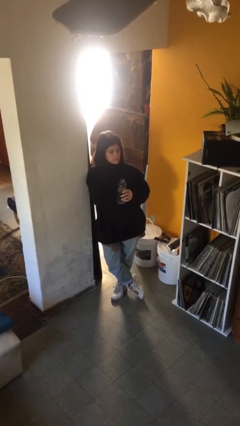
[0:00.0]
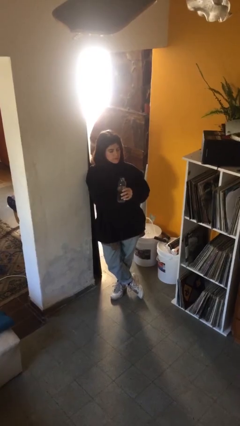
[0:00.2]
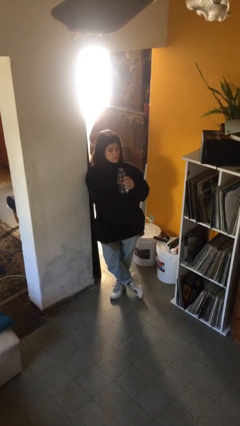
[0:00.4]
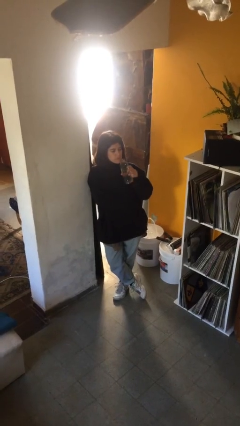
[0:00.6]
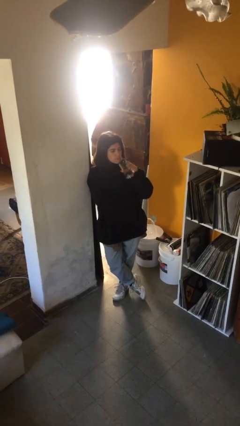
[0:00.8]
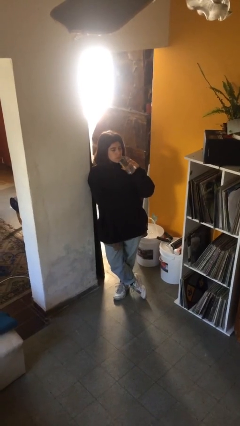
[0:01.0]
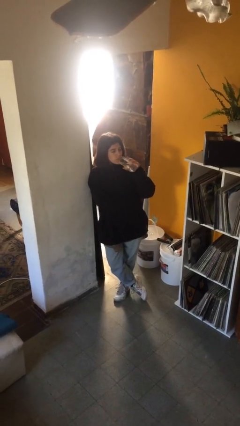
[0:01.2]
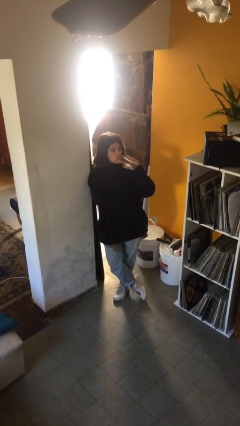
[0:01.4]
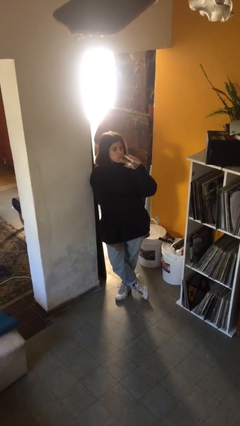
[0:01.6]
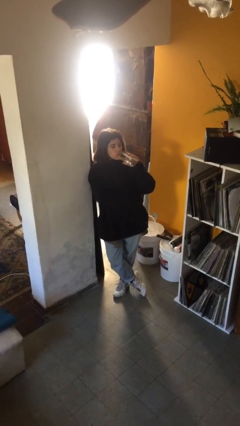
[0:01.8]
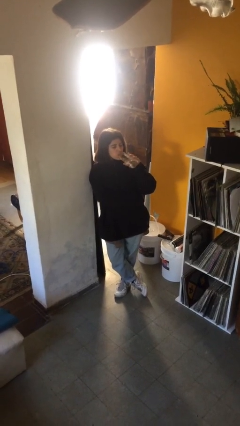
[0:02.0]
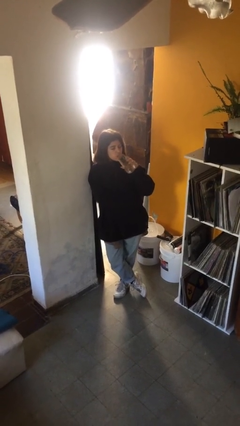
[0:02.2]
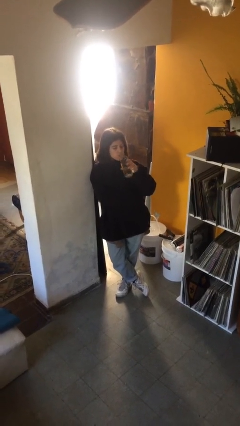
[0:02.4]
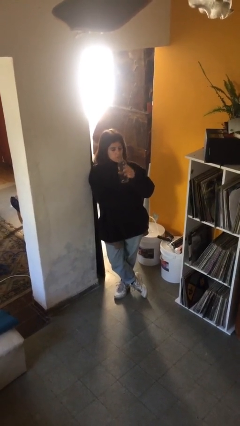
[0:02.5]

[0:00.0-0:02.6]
person drinks from bottle

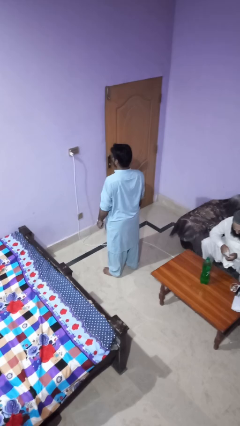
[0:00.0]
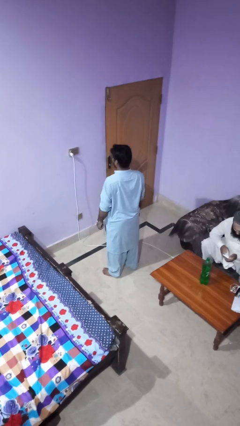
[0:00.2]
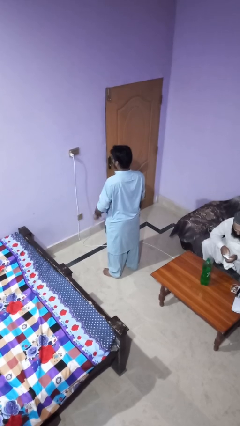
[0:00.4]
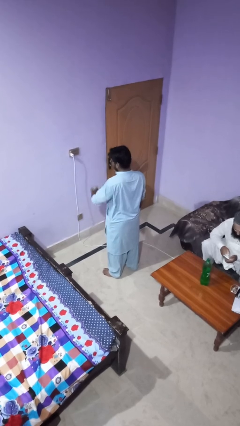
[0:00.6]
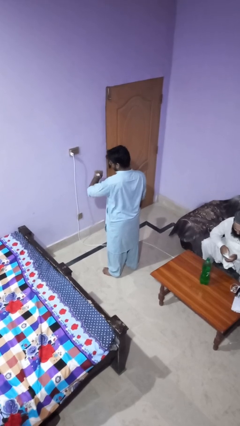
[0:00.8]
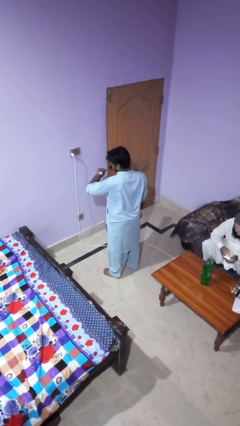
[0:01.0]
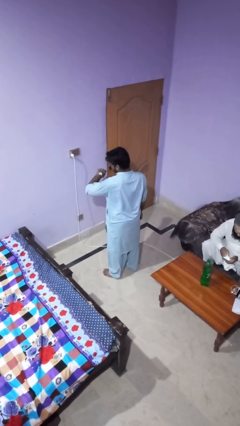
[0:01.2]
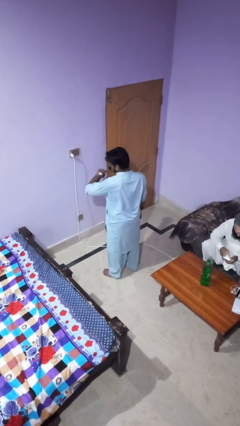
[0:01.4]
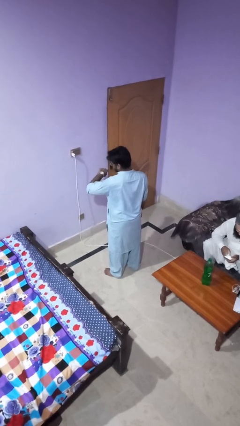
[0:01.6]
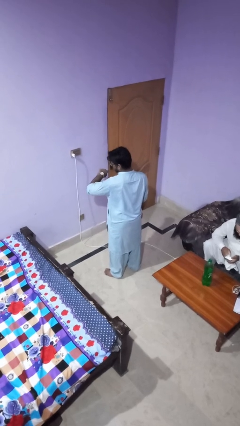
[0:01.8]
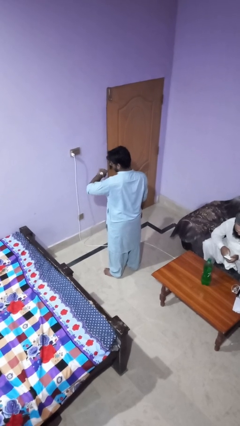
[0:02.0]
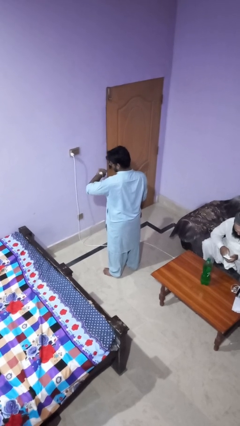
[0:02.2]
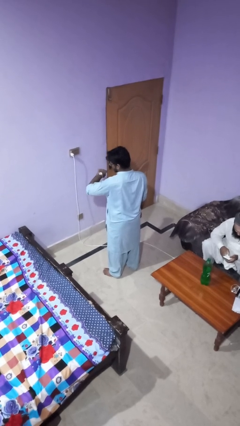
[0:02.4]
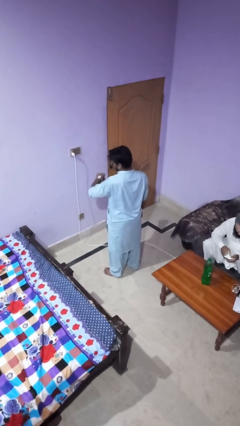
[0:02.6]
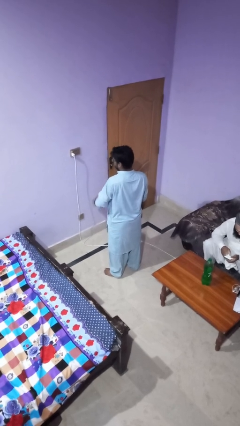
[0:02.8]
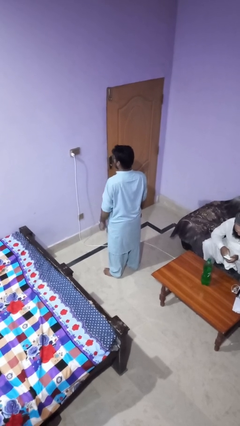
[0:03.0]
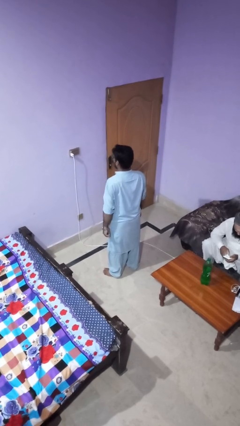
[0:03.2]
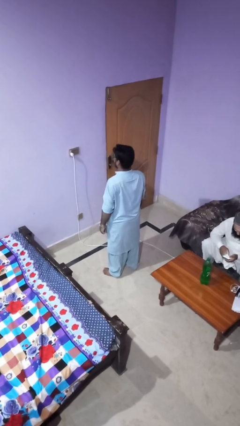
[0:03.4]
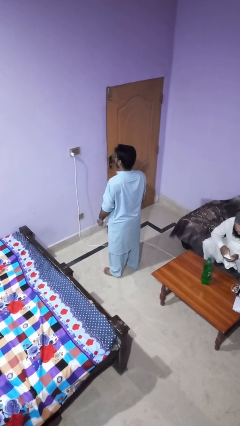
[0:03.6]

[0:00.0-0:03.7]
person looks at wristwatch

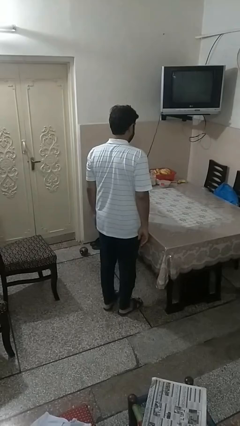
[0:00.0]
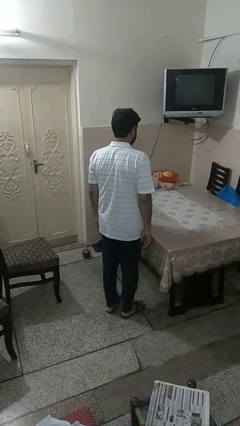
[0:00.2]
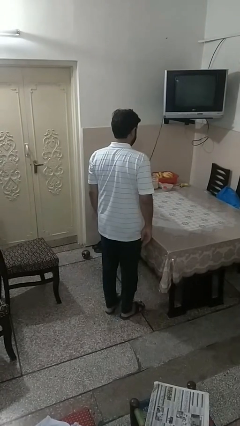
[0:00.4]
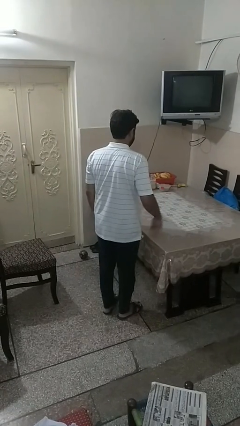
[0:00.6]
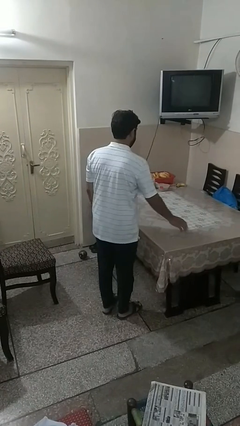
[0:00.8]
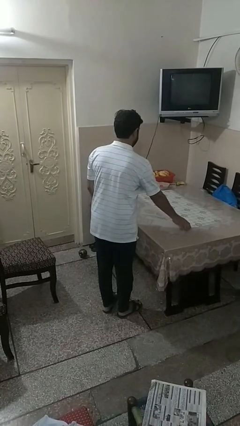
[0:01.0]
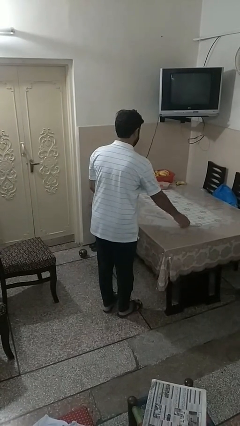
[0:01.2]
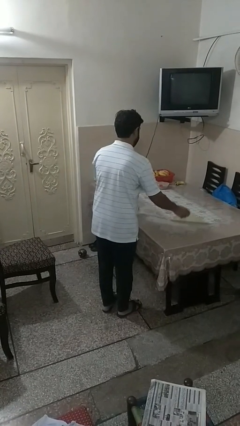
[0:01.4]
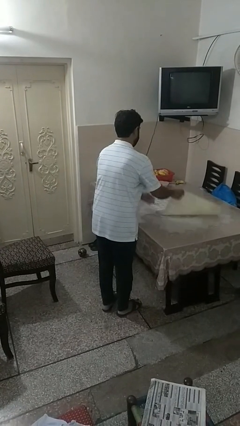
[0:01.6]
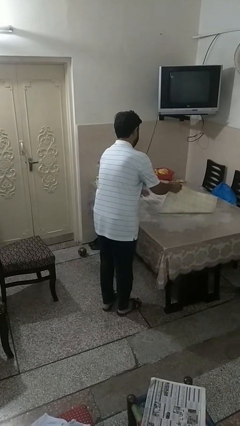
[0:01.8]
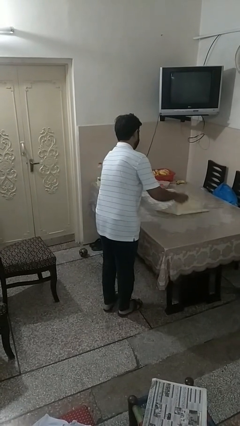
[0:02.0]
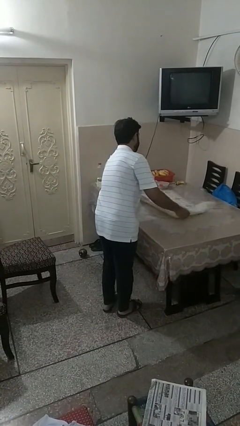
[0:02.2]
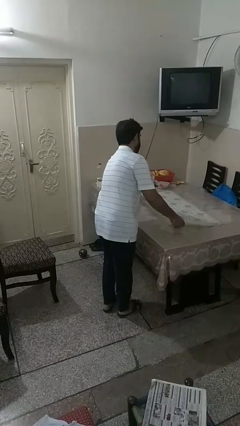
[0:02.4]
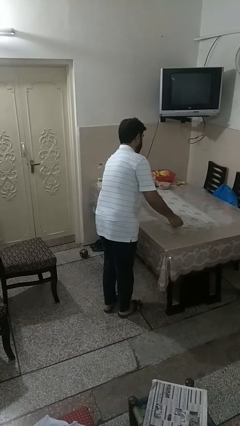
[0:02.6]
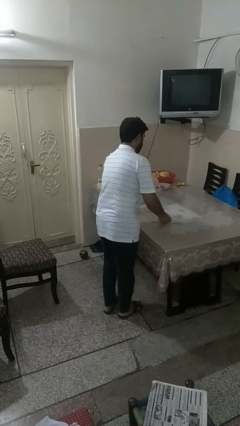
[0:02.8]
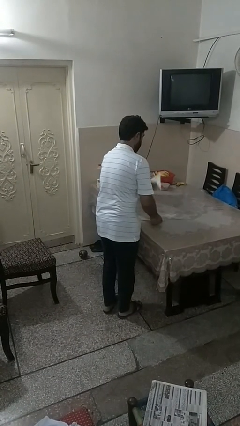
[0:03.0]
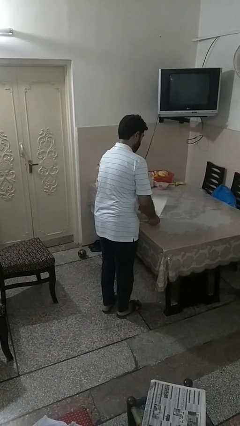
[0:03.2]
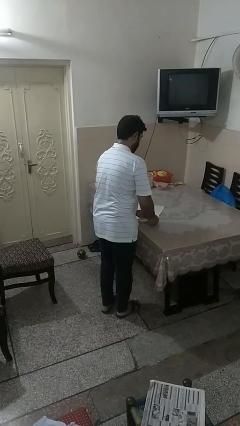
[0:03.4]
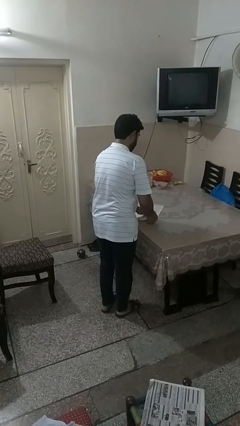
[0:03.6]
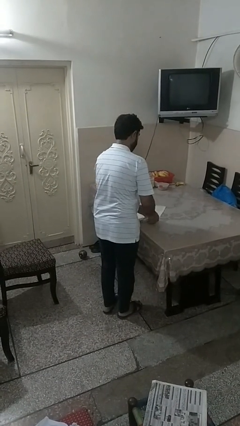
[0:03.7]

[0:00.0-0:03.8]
person folds tablecloth

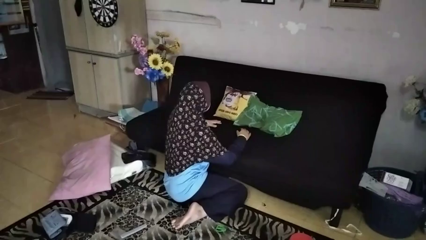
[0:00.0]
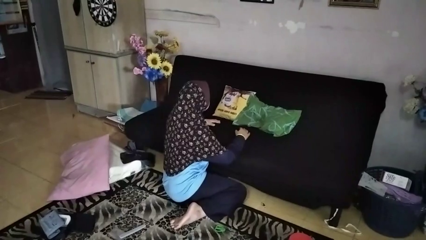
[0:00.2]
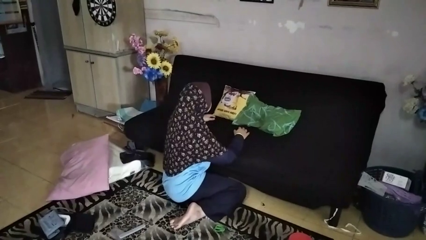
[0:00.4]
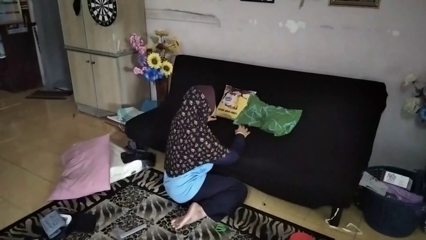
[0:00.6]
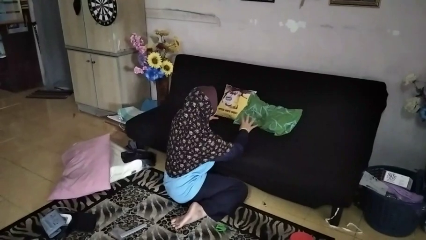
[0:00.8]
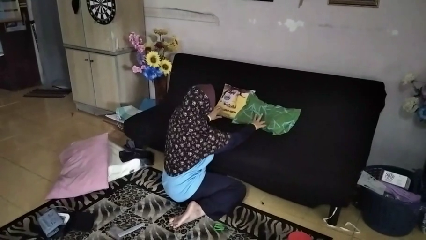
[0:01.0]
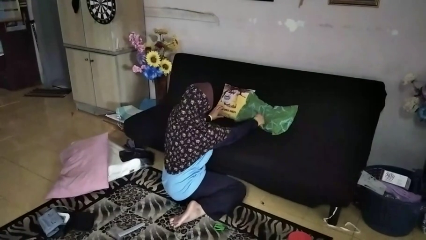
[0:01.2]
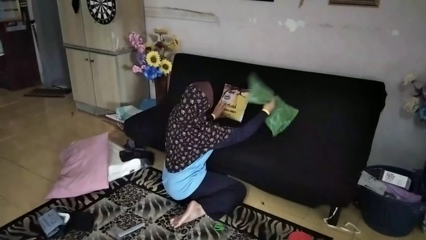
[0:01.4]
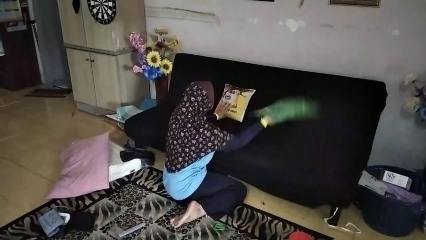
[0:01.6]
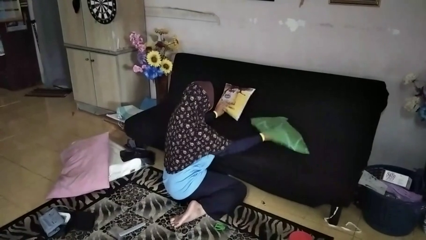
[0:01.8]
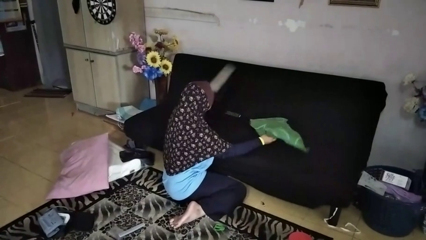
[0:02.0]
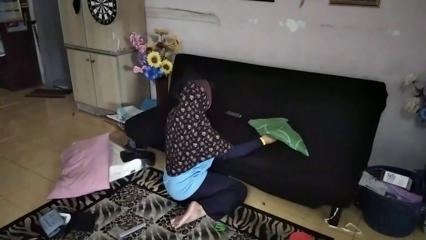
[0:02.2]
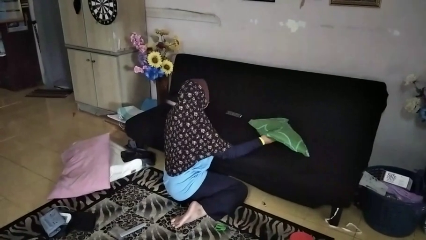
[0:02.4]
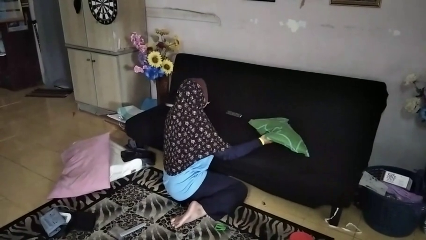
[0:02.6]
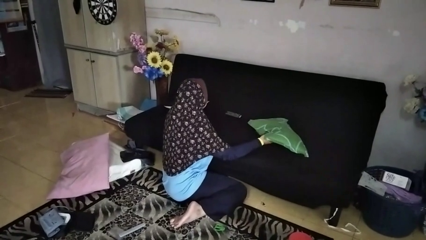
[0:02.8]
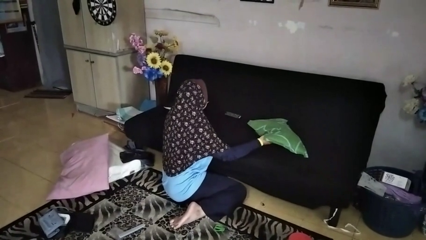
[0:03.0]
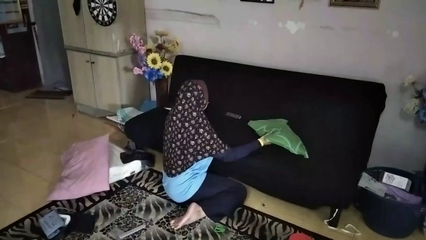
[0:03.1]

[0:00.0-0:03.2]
person searches in couch

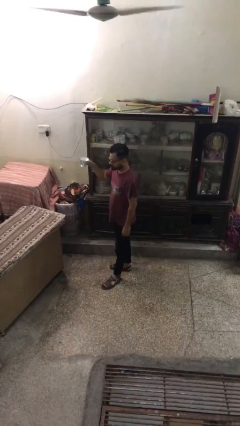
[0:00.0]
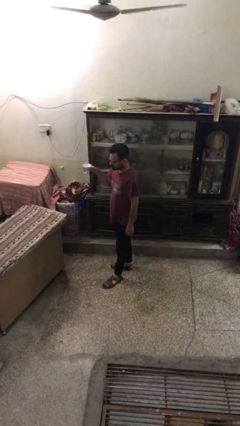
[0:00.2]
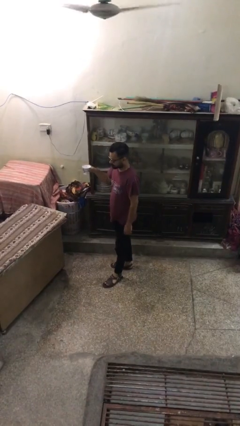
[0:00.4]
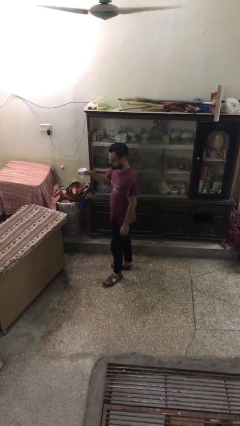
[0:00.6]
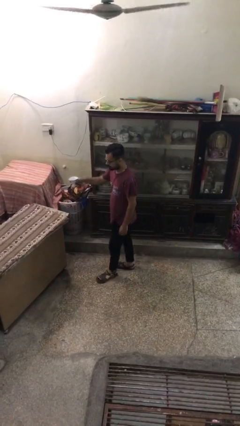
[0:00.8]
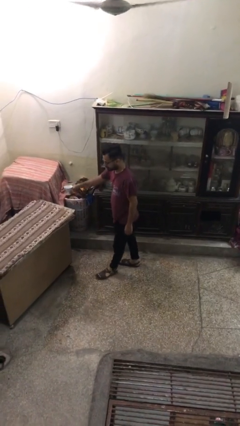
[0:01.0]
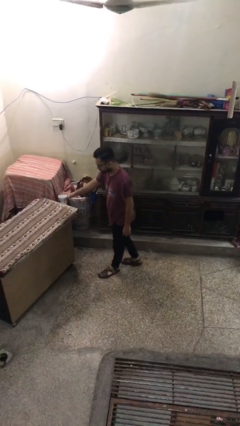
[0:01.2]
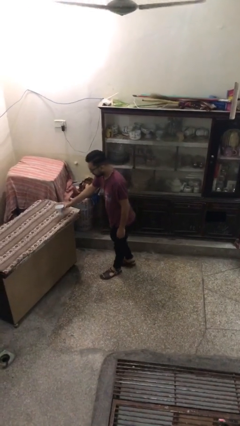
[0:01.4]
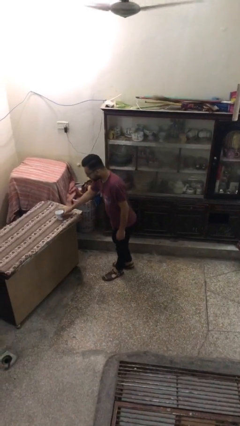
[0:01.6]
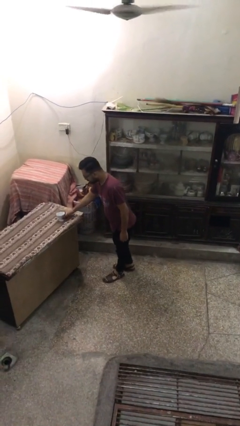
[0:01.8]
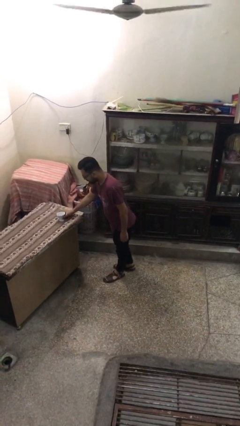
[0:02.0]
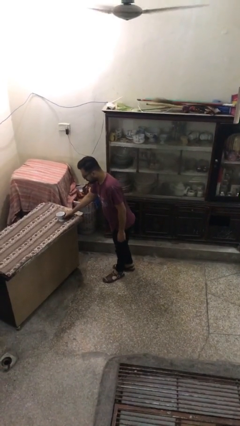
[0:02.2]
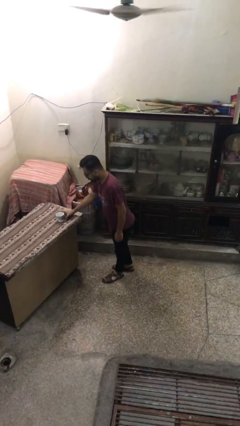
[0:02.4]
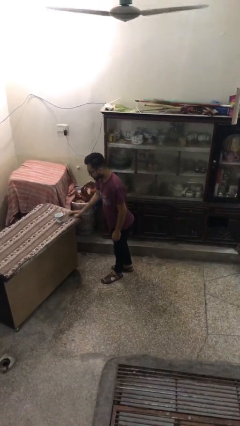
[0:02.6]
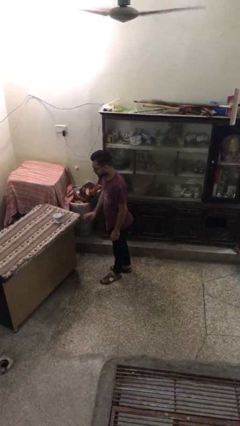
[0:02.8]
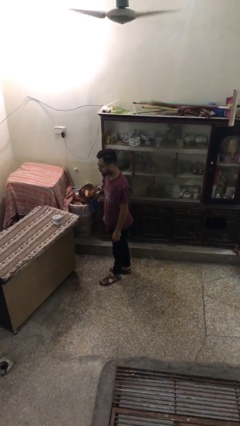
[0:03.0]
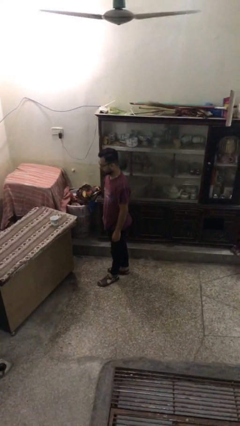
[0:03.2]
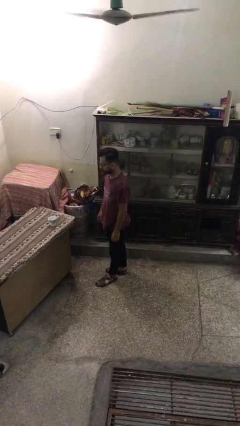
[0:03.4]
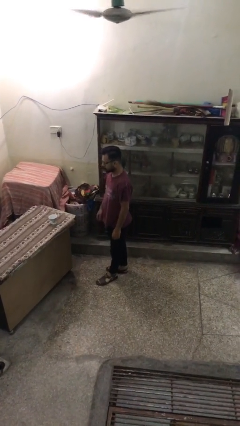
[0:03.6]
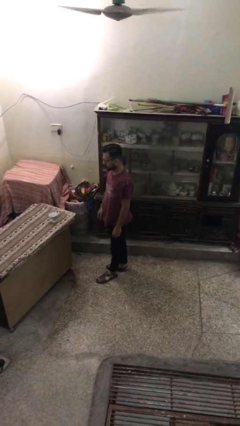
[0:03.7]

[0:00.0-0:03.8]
person puts down object on table
